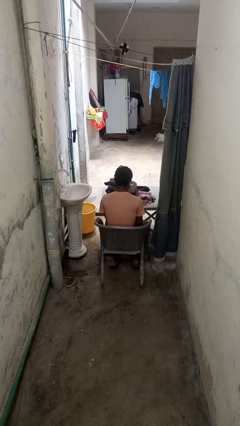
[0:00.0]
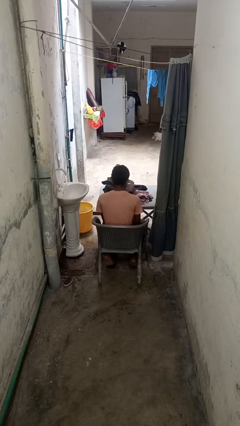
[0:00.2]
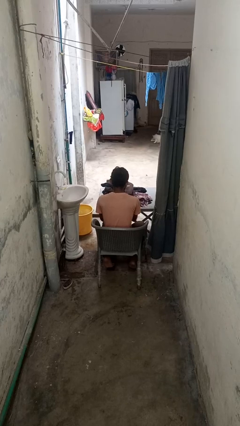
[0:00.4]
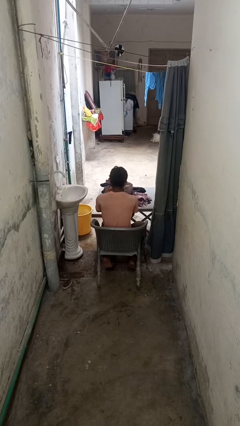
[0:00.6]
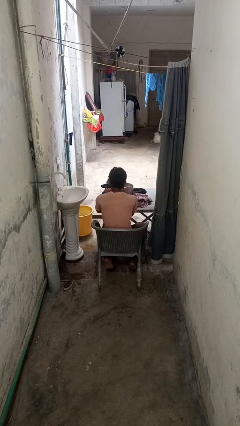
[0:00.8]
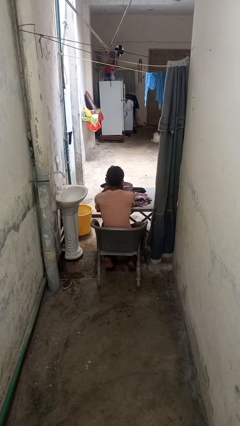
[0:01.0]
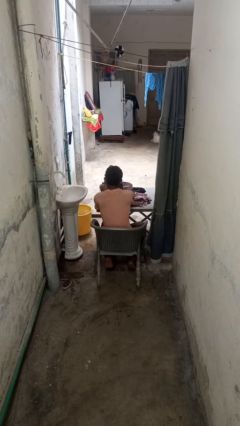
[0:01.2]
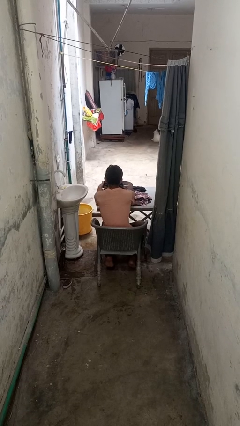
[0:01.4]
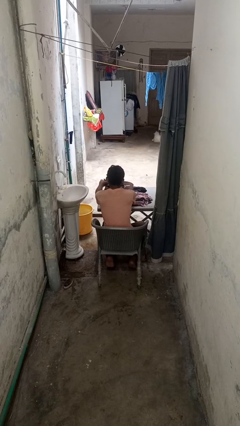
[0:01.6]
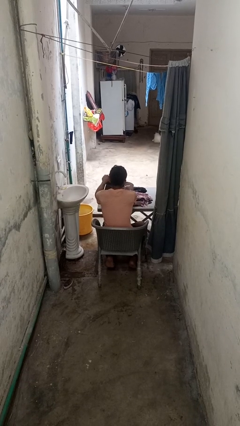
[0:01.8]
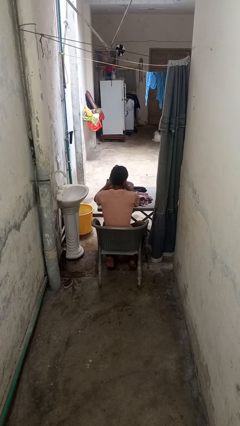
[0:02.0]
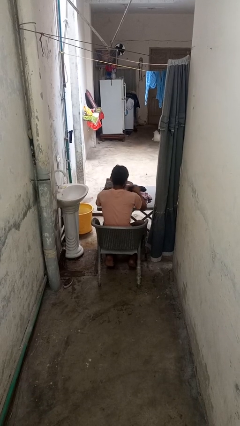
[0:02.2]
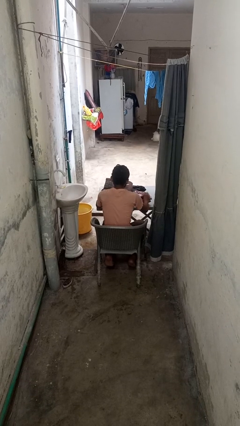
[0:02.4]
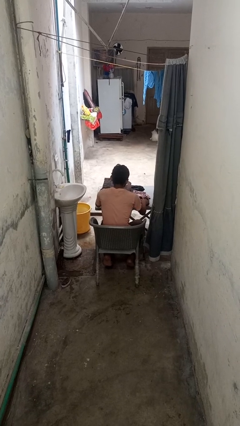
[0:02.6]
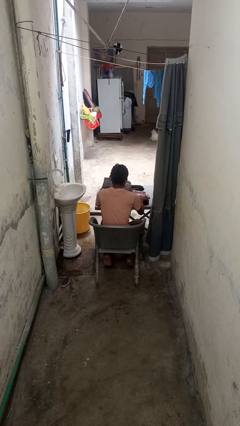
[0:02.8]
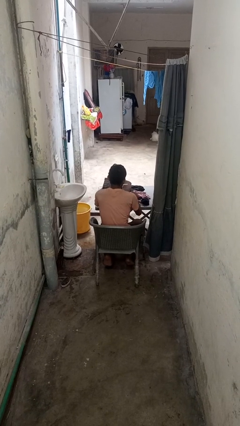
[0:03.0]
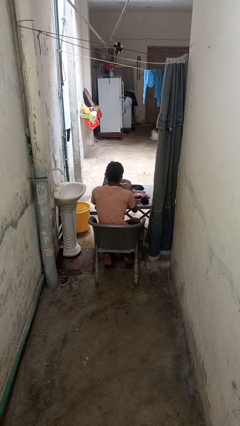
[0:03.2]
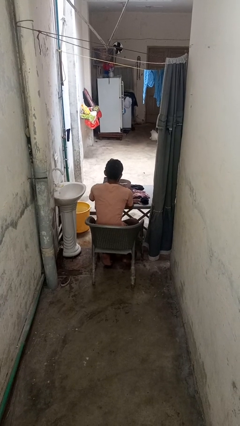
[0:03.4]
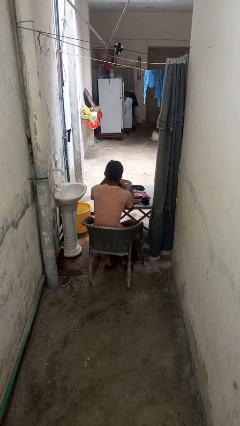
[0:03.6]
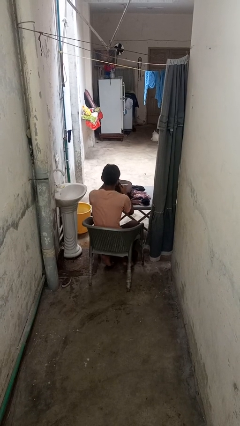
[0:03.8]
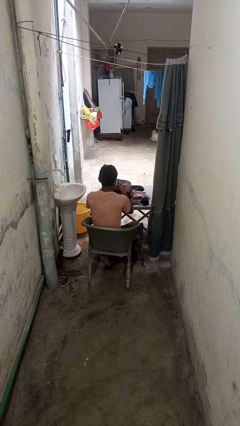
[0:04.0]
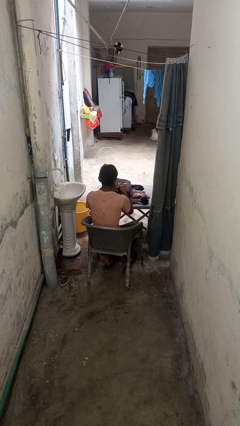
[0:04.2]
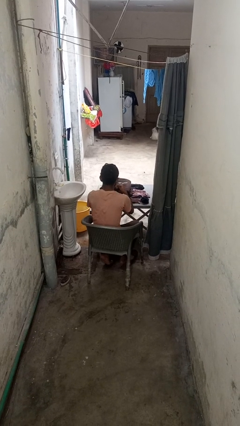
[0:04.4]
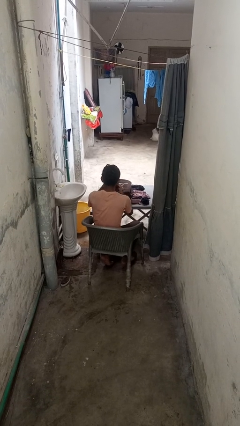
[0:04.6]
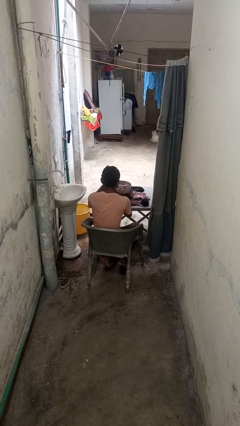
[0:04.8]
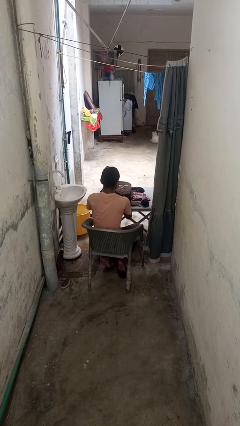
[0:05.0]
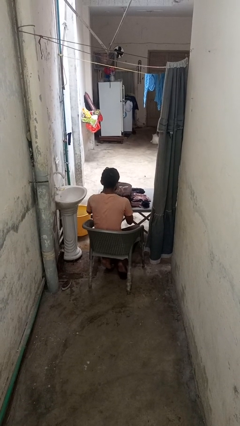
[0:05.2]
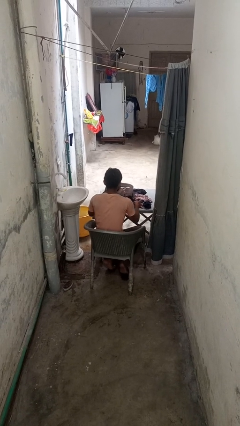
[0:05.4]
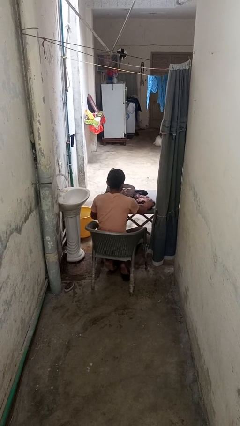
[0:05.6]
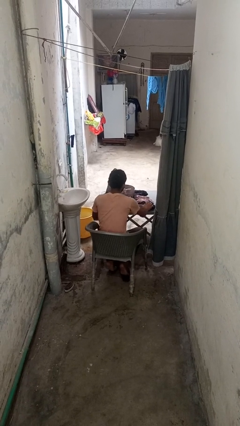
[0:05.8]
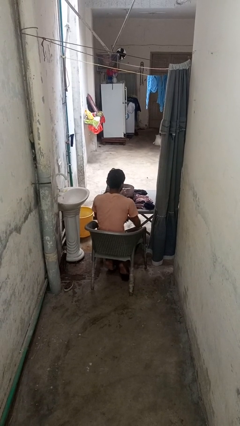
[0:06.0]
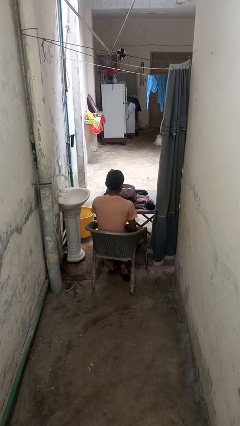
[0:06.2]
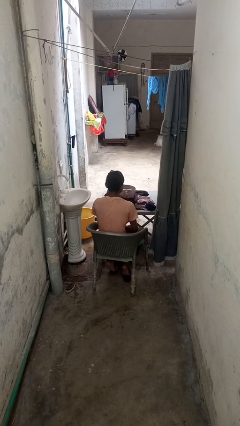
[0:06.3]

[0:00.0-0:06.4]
person folds socks

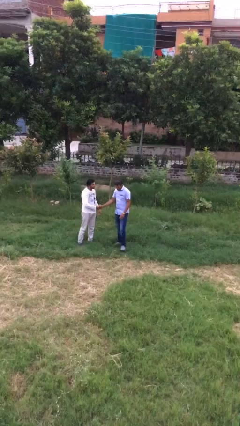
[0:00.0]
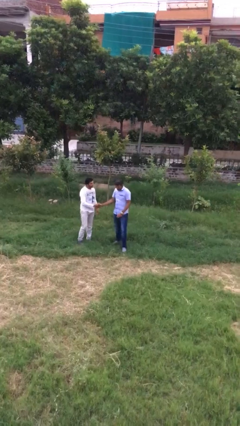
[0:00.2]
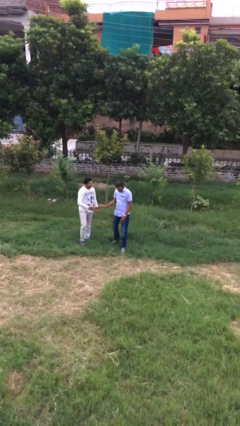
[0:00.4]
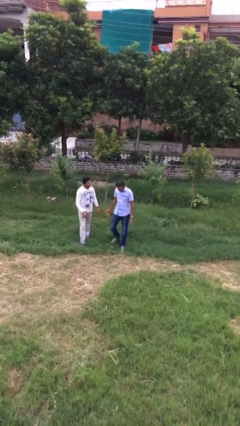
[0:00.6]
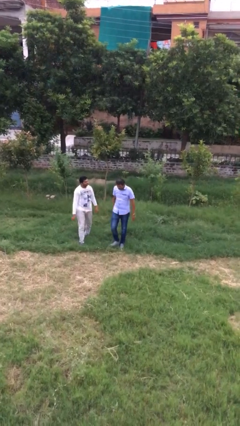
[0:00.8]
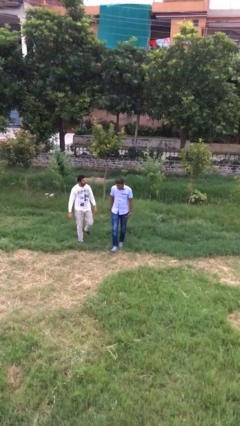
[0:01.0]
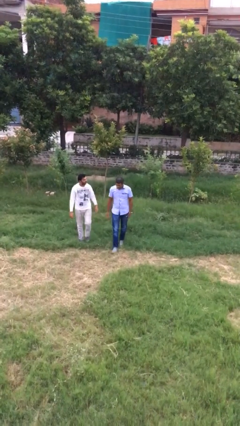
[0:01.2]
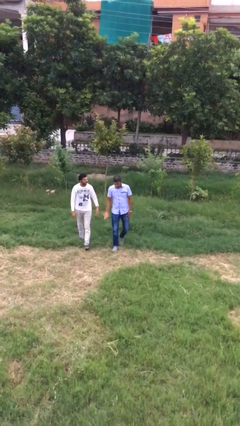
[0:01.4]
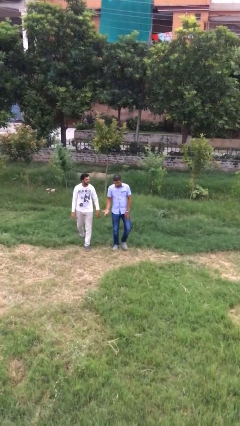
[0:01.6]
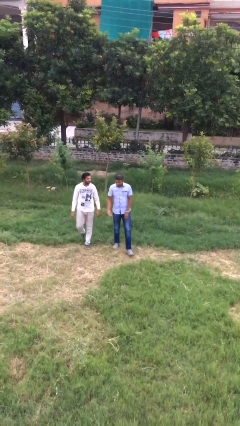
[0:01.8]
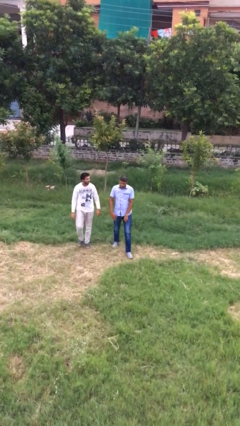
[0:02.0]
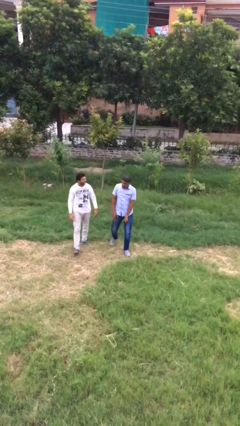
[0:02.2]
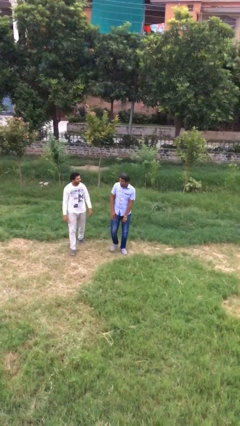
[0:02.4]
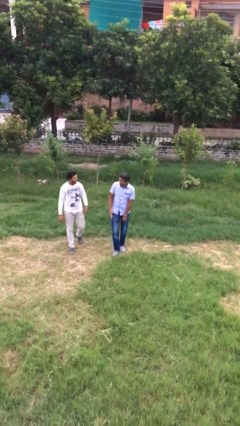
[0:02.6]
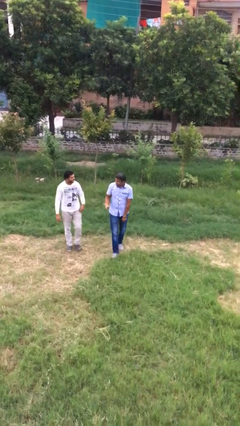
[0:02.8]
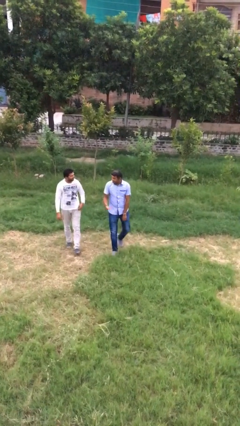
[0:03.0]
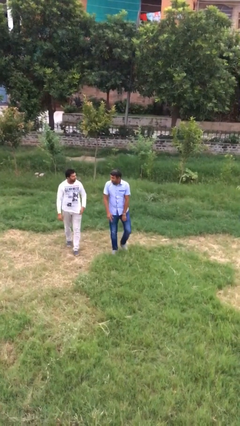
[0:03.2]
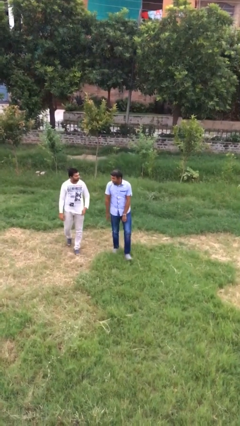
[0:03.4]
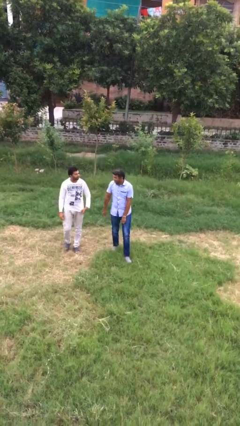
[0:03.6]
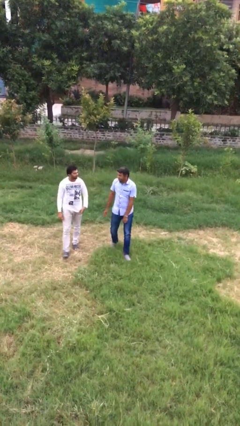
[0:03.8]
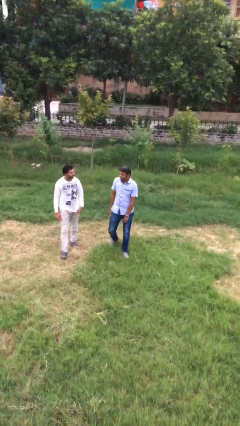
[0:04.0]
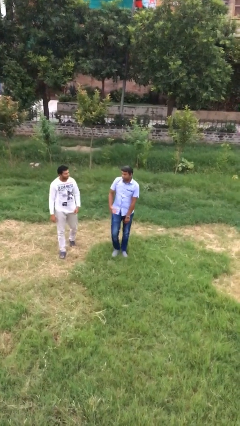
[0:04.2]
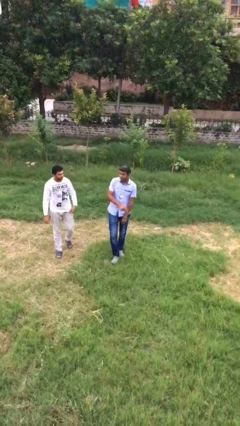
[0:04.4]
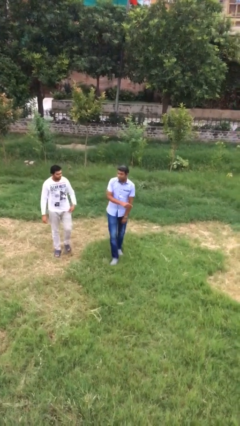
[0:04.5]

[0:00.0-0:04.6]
person talks to person

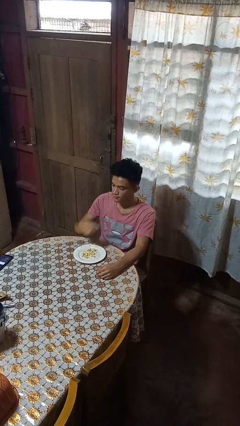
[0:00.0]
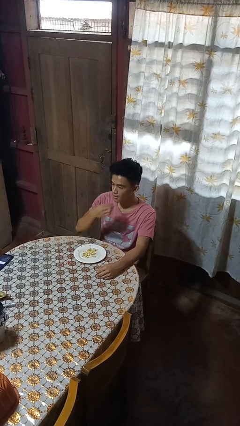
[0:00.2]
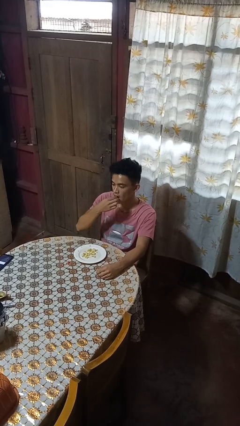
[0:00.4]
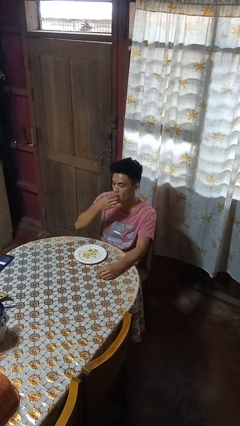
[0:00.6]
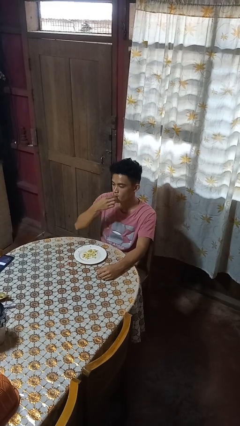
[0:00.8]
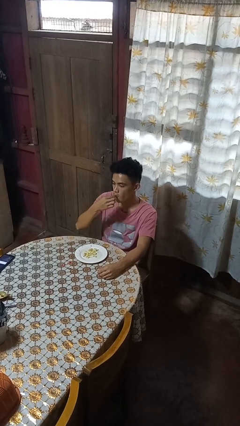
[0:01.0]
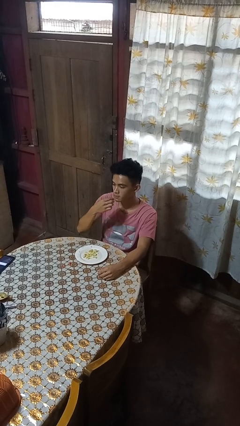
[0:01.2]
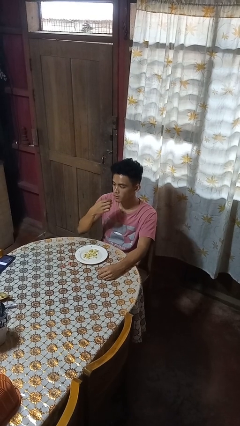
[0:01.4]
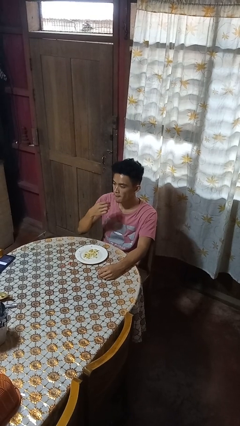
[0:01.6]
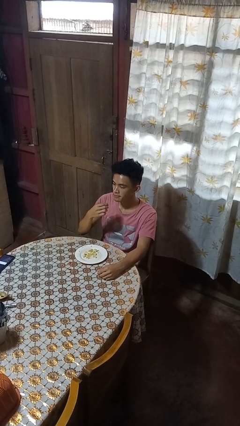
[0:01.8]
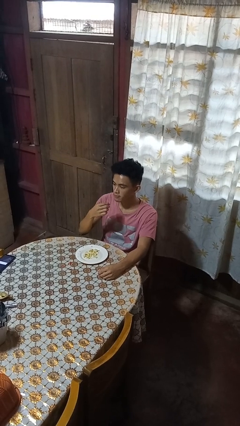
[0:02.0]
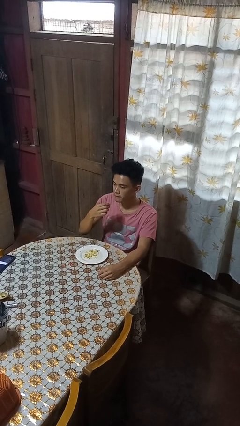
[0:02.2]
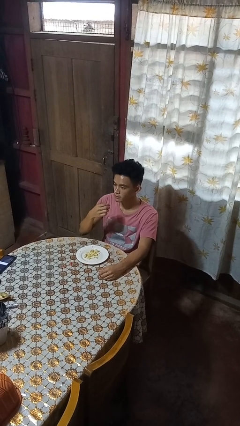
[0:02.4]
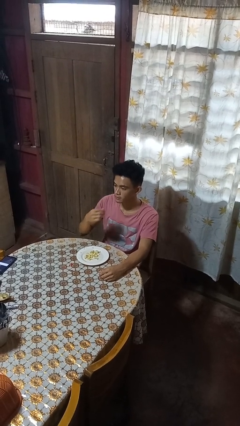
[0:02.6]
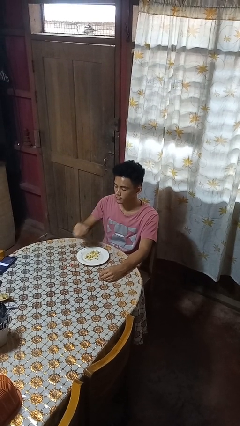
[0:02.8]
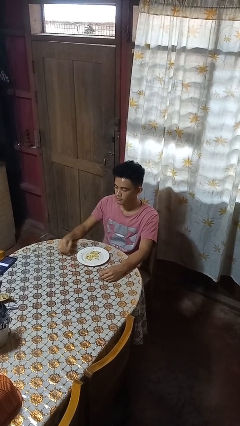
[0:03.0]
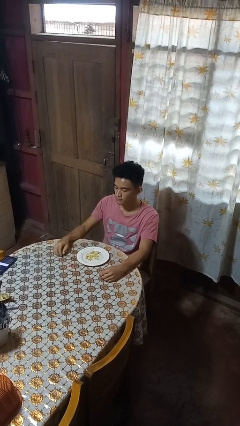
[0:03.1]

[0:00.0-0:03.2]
person eats with hands

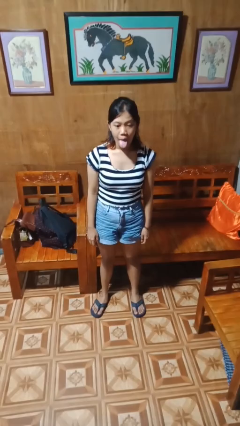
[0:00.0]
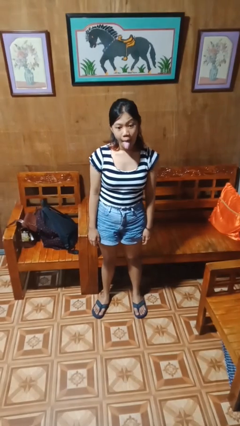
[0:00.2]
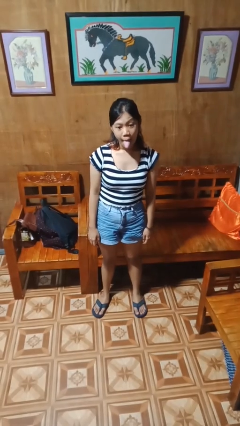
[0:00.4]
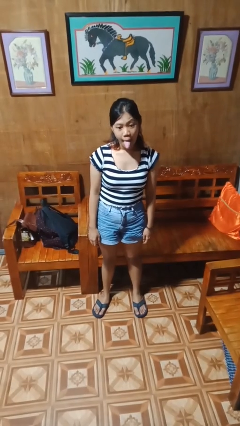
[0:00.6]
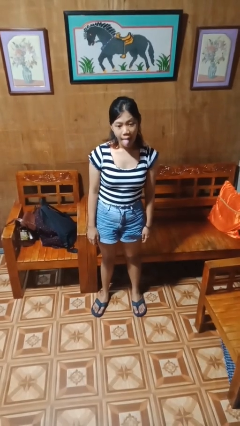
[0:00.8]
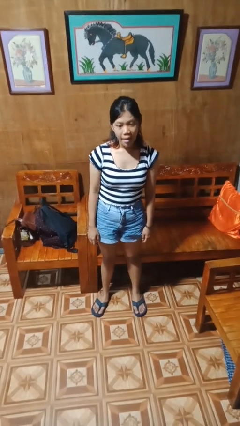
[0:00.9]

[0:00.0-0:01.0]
person sticks out tongue

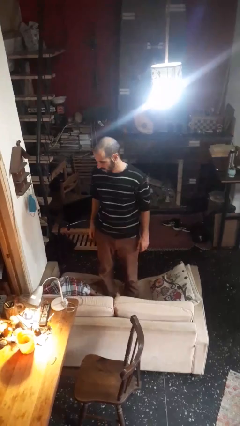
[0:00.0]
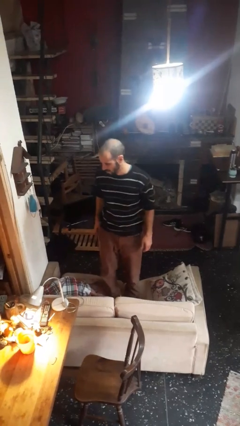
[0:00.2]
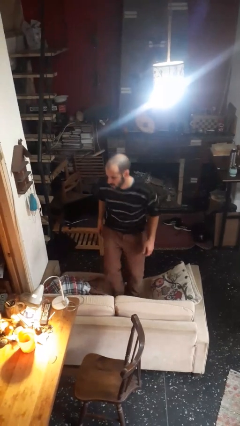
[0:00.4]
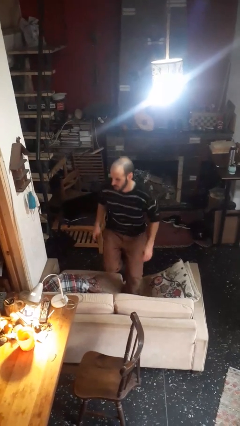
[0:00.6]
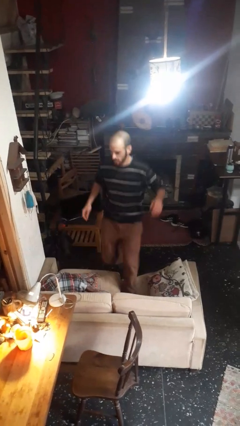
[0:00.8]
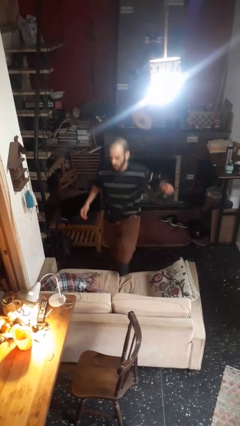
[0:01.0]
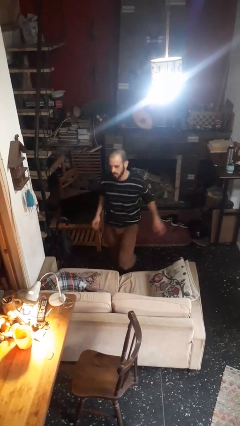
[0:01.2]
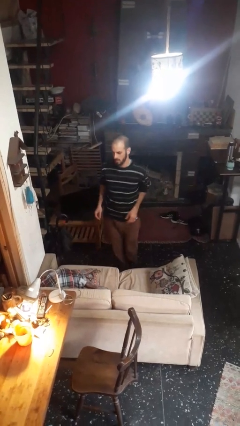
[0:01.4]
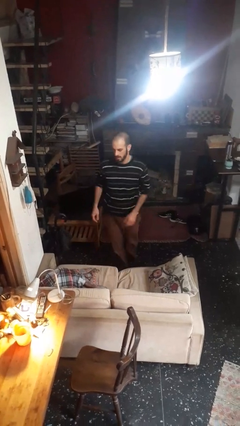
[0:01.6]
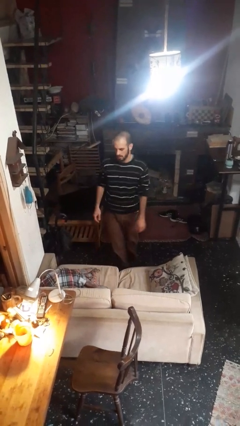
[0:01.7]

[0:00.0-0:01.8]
person climbs off couch
